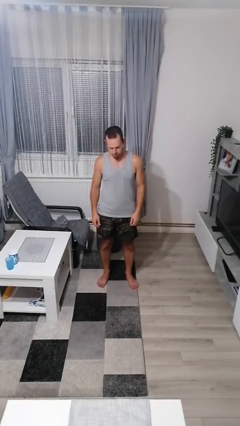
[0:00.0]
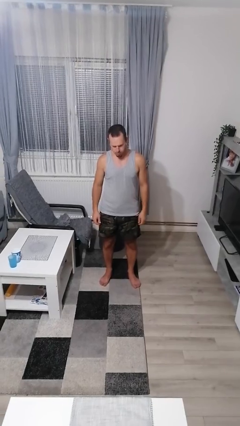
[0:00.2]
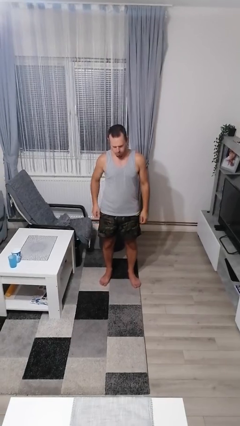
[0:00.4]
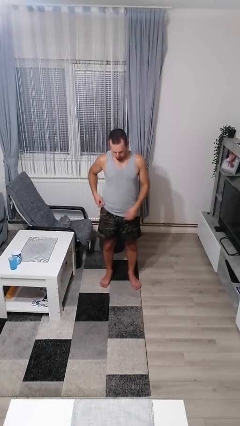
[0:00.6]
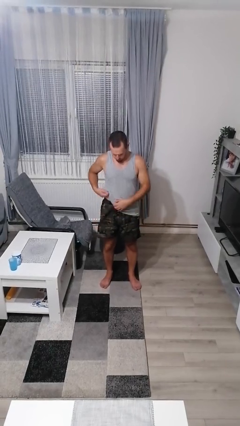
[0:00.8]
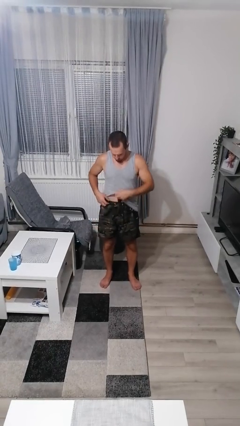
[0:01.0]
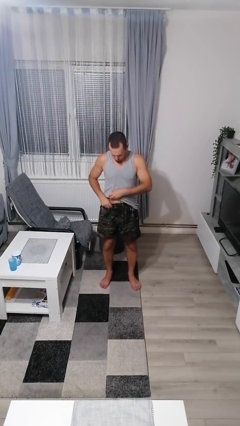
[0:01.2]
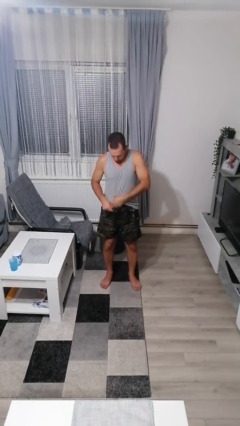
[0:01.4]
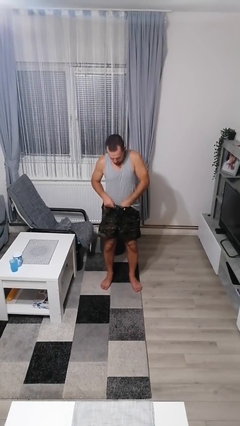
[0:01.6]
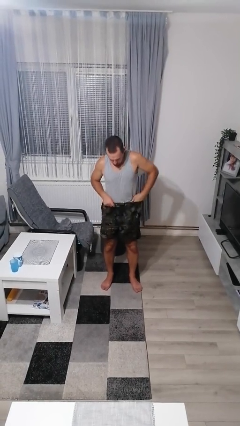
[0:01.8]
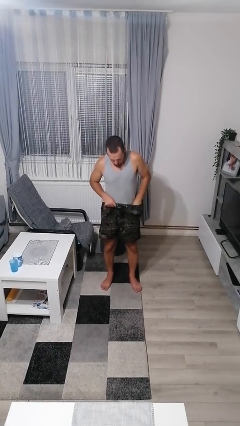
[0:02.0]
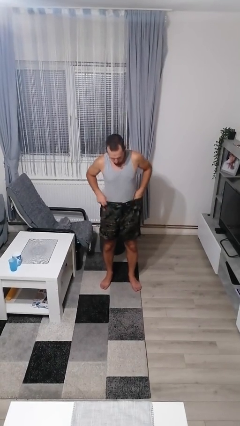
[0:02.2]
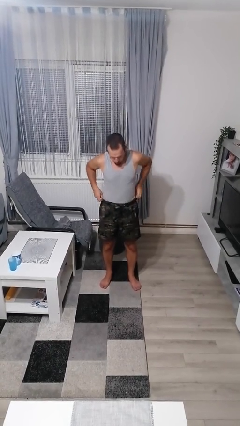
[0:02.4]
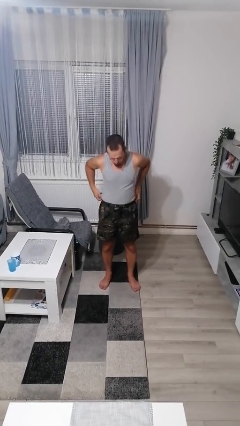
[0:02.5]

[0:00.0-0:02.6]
person tucks in shirt

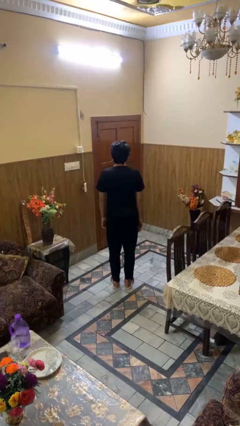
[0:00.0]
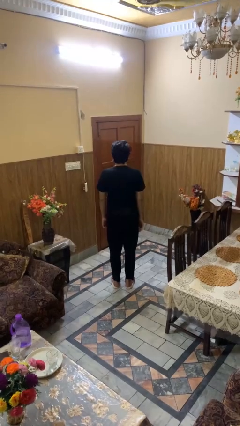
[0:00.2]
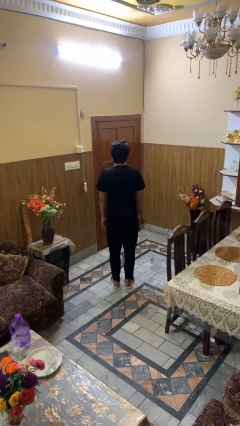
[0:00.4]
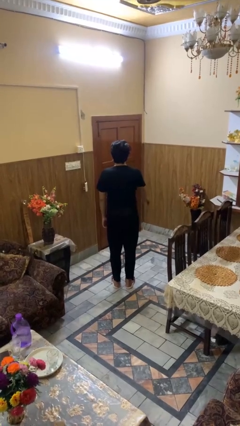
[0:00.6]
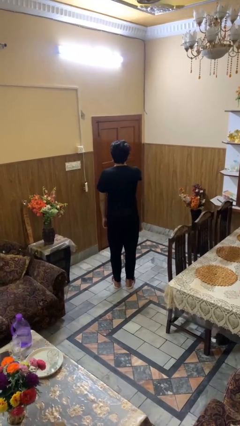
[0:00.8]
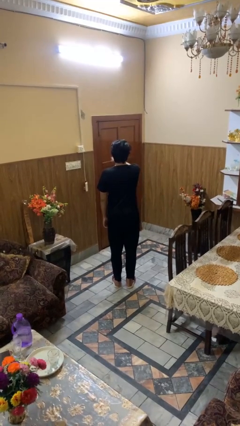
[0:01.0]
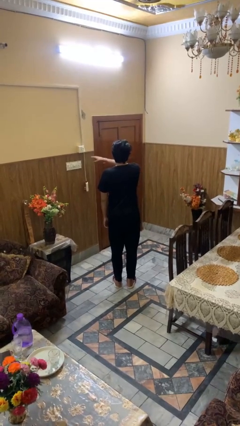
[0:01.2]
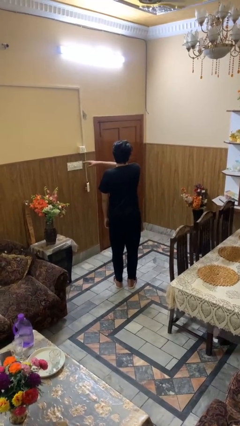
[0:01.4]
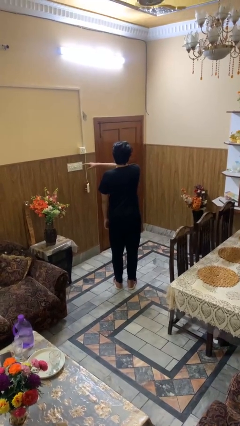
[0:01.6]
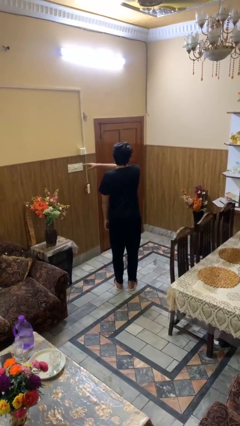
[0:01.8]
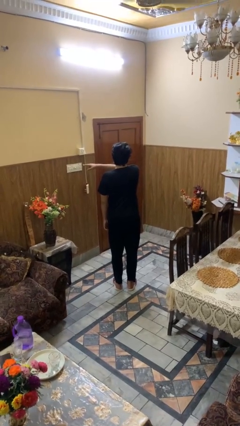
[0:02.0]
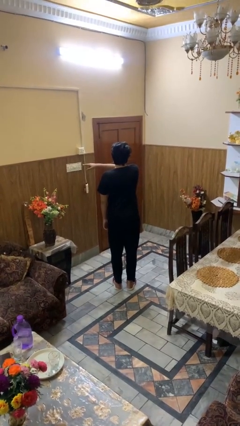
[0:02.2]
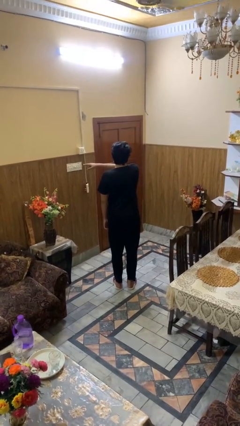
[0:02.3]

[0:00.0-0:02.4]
person gestures swipe left

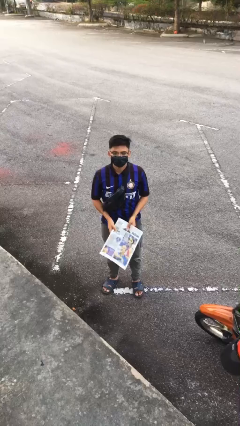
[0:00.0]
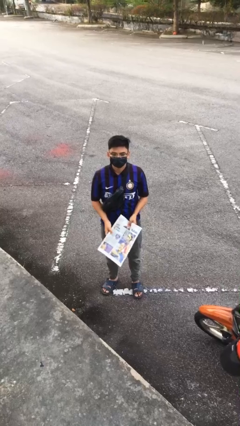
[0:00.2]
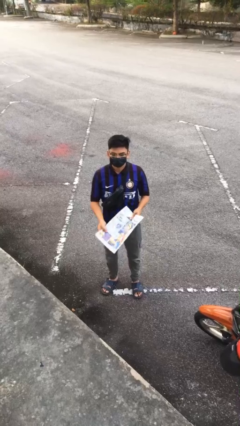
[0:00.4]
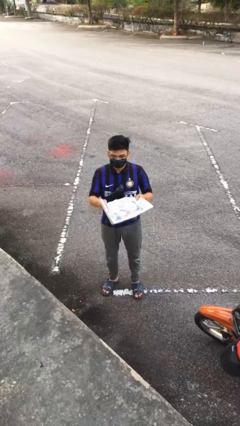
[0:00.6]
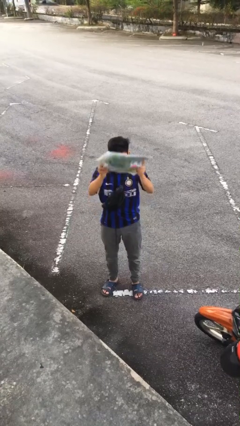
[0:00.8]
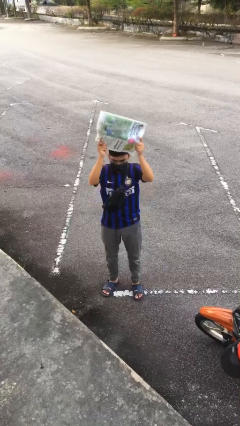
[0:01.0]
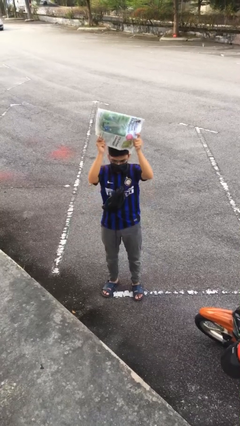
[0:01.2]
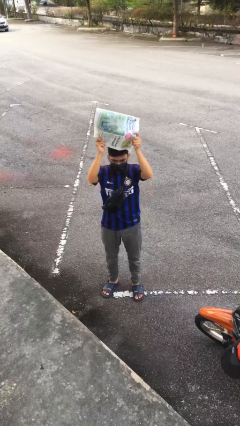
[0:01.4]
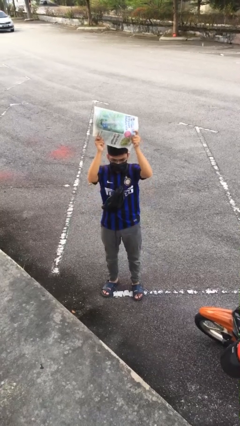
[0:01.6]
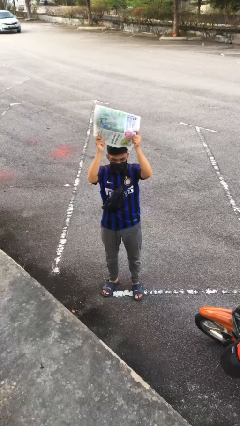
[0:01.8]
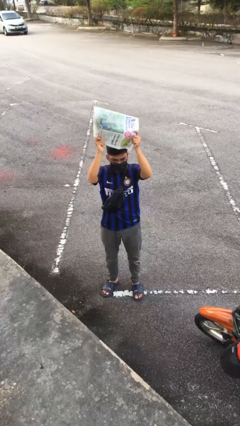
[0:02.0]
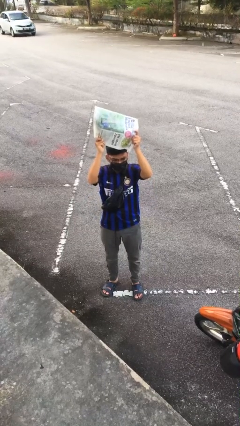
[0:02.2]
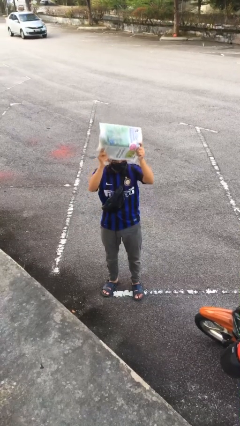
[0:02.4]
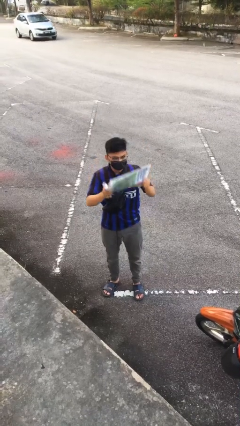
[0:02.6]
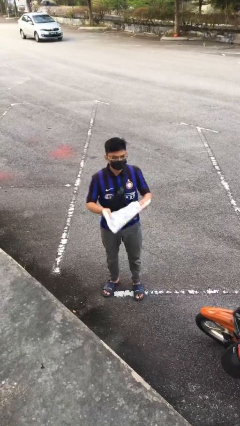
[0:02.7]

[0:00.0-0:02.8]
person holds object above head

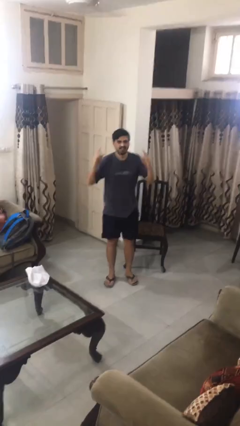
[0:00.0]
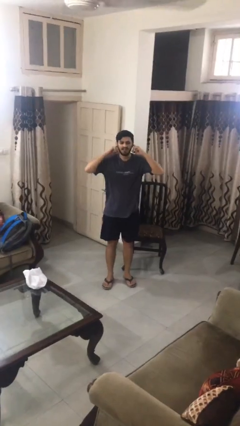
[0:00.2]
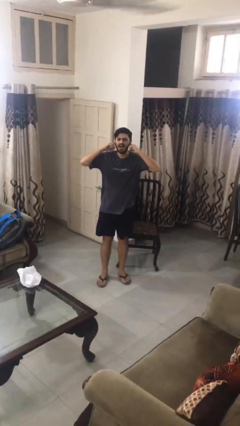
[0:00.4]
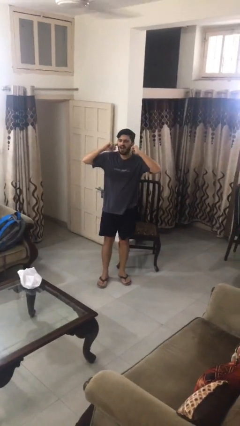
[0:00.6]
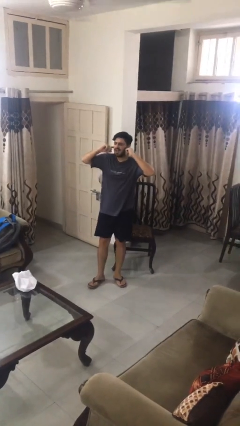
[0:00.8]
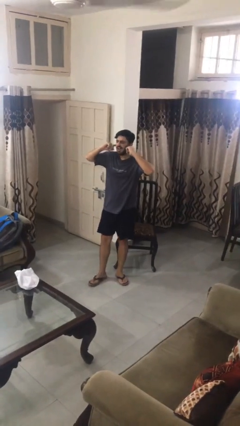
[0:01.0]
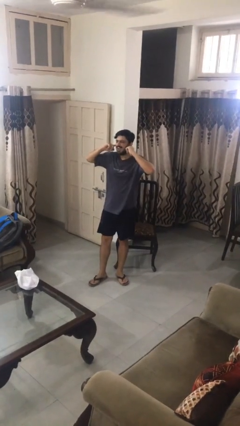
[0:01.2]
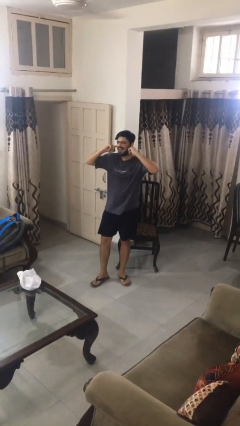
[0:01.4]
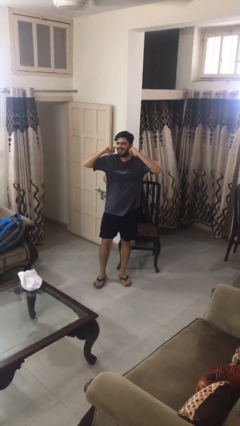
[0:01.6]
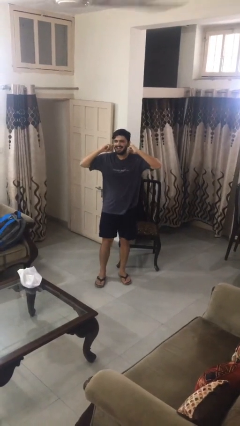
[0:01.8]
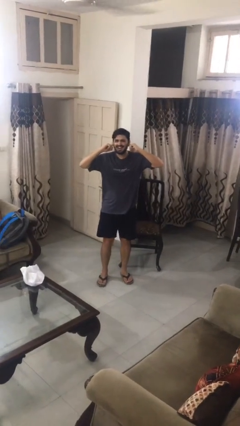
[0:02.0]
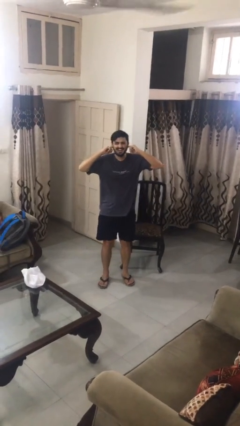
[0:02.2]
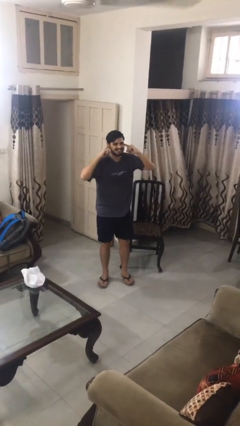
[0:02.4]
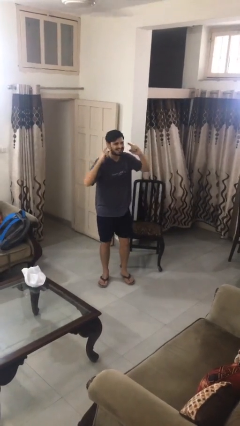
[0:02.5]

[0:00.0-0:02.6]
person puts fingers in ear

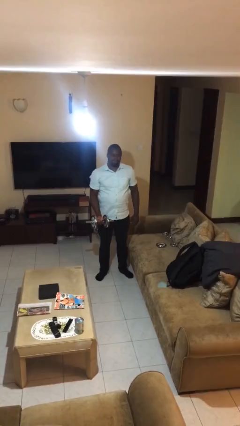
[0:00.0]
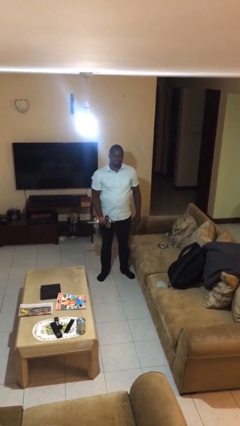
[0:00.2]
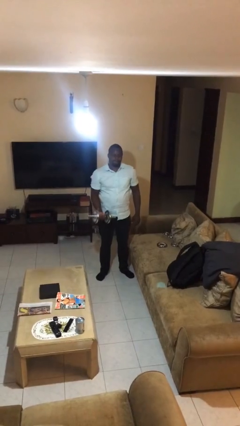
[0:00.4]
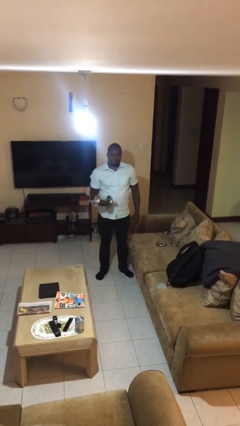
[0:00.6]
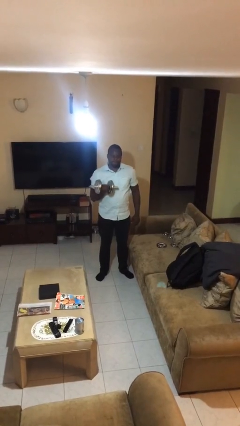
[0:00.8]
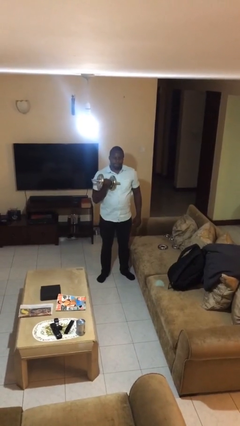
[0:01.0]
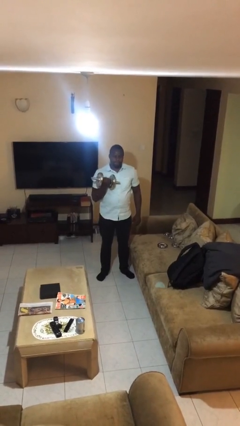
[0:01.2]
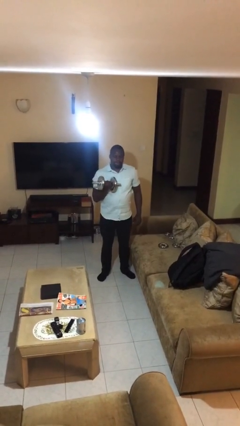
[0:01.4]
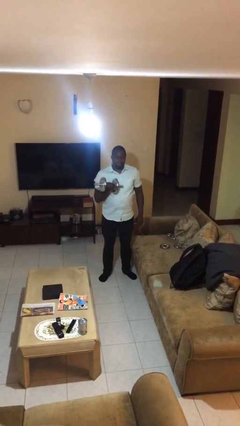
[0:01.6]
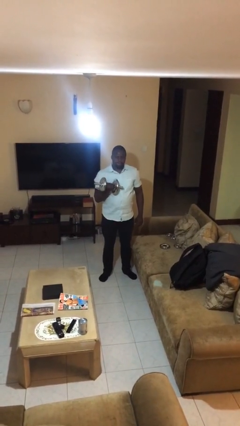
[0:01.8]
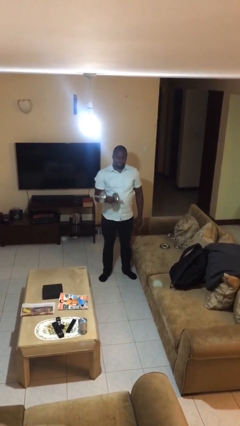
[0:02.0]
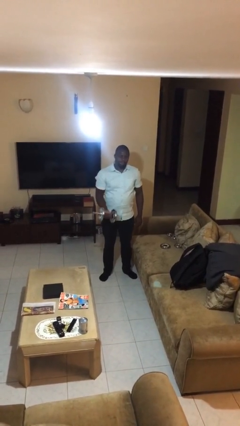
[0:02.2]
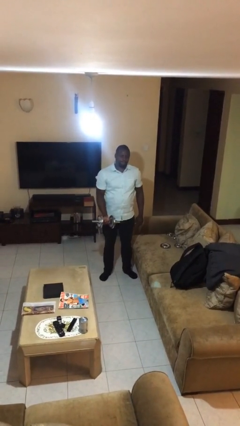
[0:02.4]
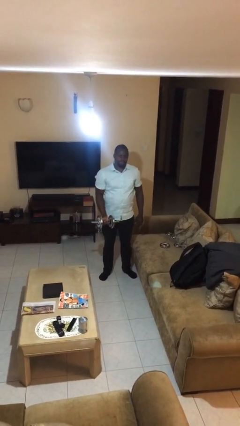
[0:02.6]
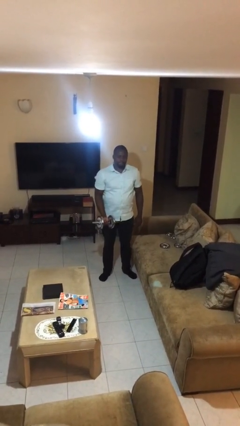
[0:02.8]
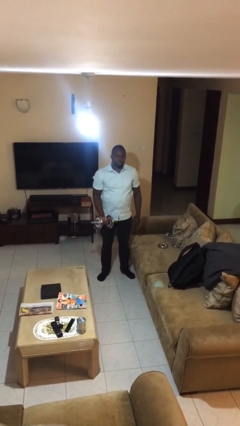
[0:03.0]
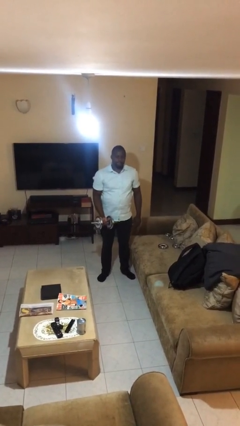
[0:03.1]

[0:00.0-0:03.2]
person lifts dumbbells

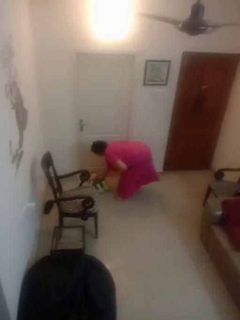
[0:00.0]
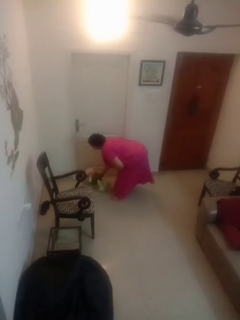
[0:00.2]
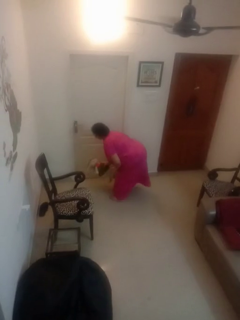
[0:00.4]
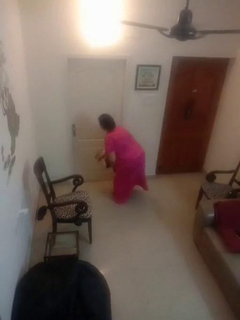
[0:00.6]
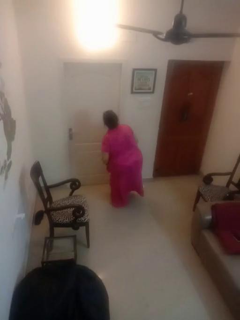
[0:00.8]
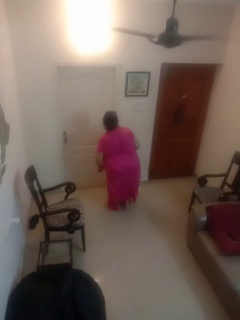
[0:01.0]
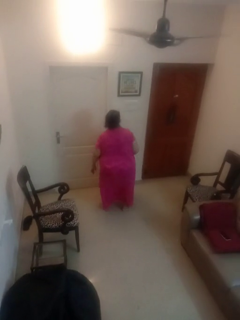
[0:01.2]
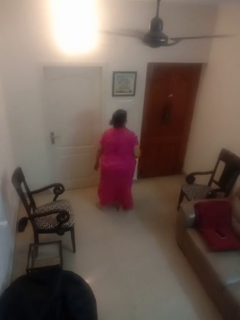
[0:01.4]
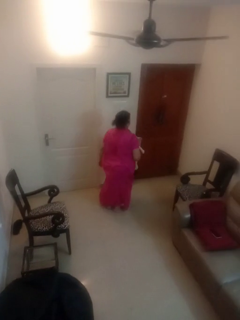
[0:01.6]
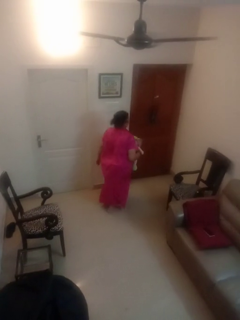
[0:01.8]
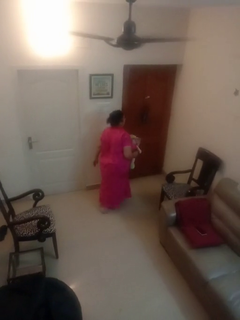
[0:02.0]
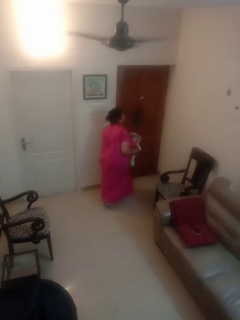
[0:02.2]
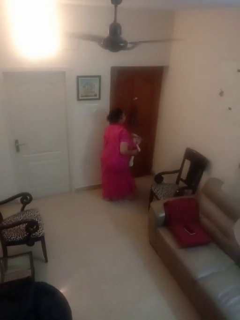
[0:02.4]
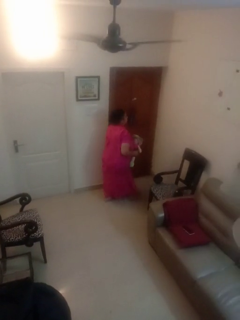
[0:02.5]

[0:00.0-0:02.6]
person picks up object from floor

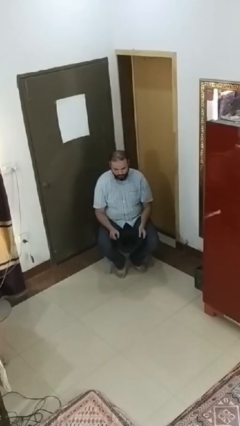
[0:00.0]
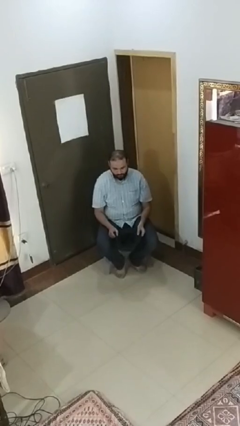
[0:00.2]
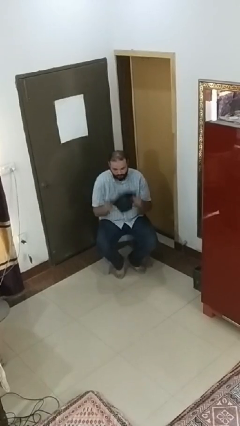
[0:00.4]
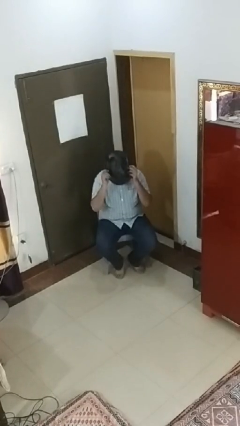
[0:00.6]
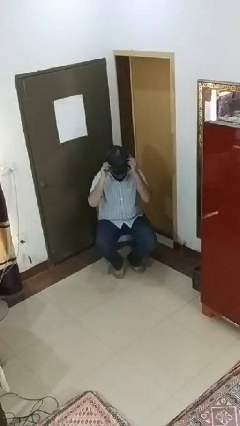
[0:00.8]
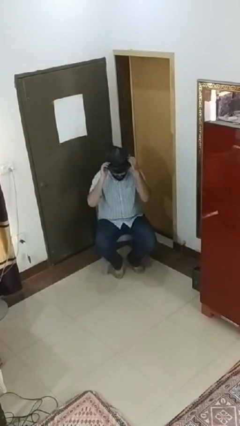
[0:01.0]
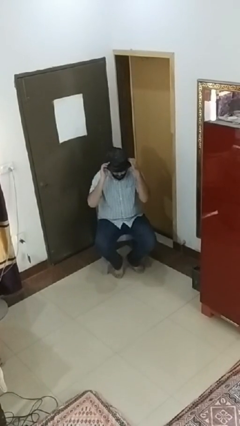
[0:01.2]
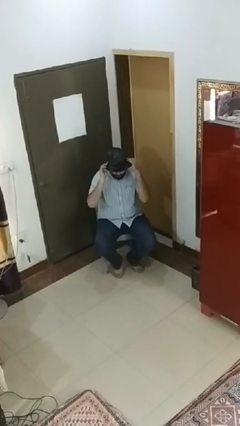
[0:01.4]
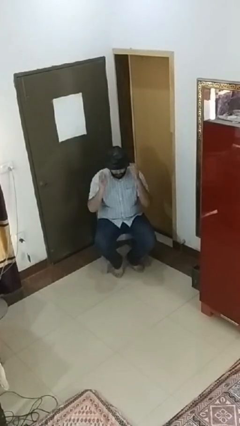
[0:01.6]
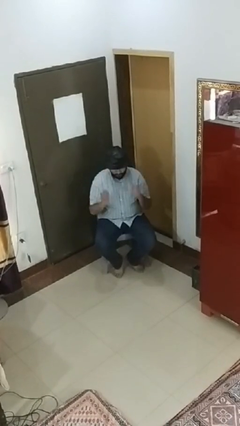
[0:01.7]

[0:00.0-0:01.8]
person puts on hat
